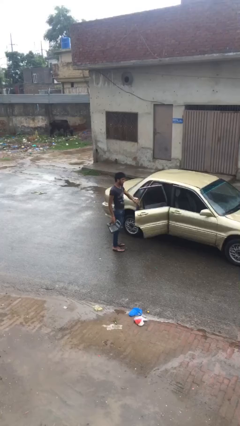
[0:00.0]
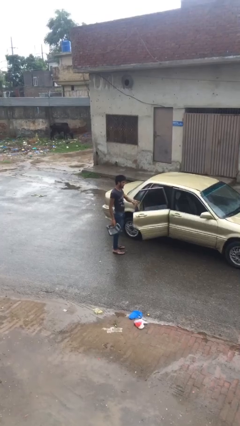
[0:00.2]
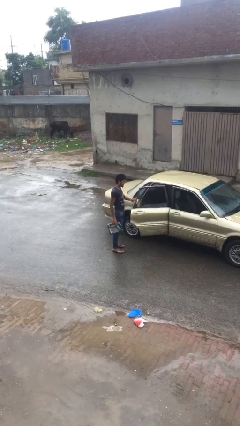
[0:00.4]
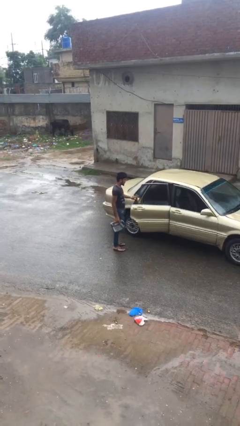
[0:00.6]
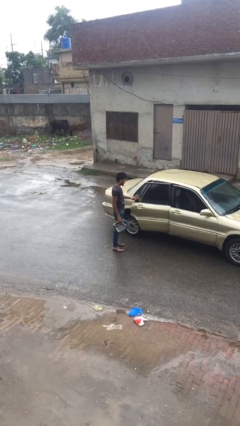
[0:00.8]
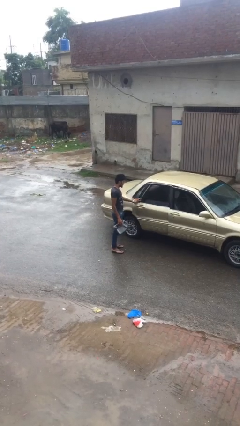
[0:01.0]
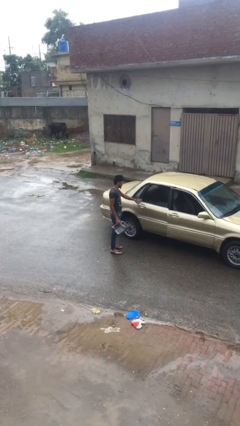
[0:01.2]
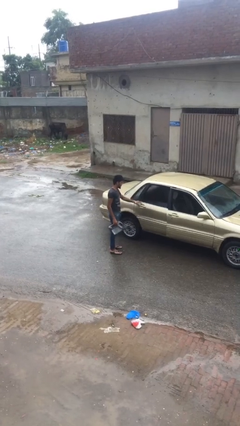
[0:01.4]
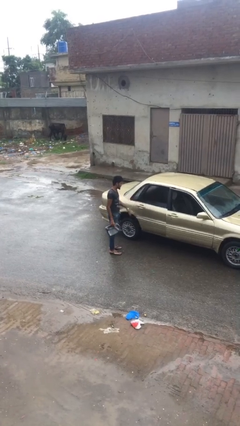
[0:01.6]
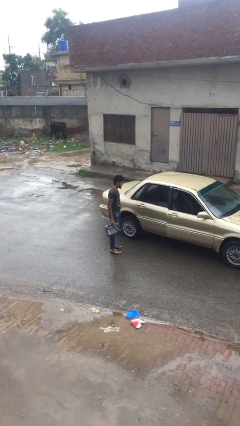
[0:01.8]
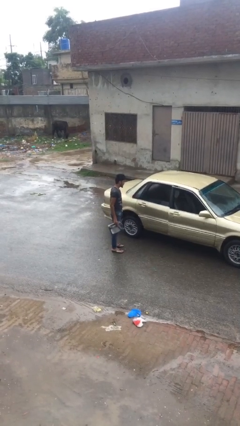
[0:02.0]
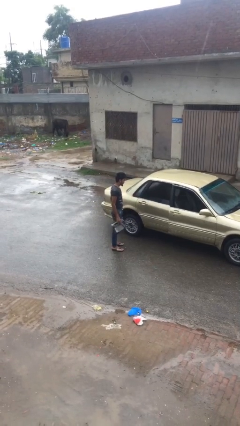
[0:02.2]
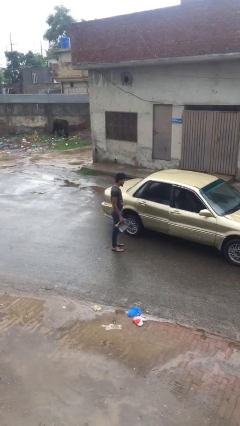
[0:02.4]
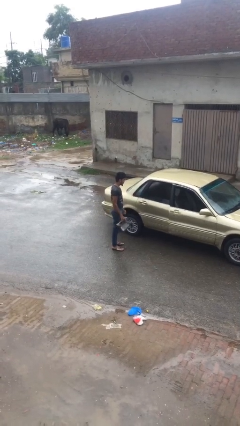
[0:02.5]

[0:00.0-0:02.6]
person closes car door

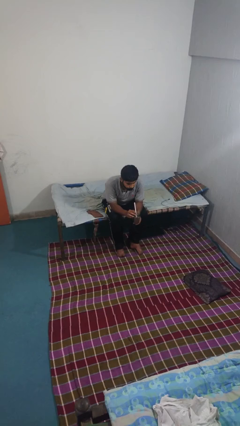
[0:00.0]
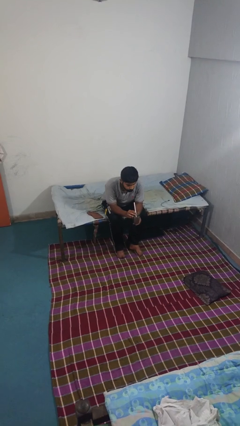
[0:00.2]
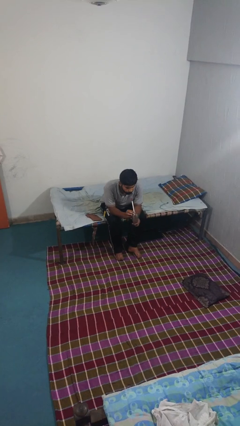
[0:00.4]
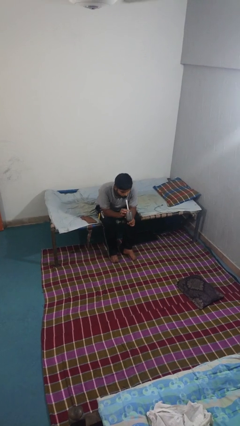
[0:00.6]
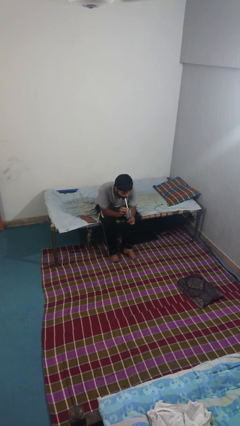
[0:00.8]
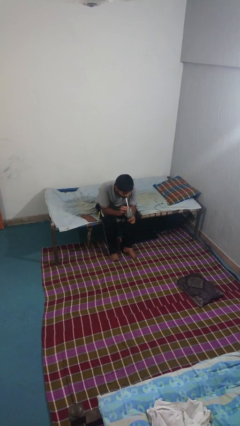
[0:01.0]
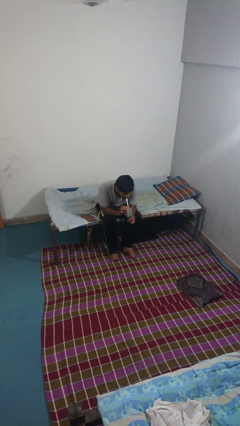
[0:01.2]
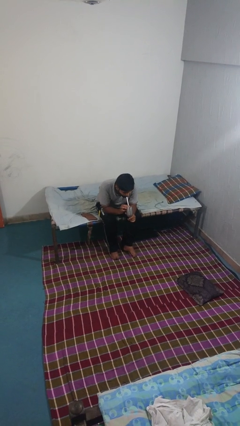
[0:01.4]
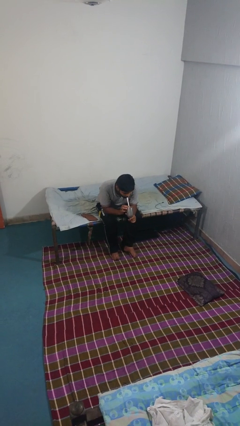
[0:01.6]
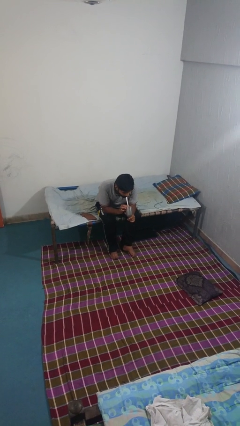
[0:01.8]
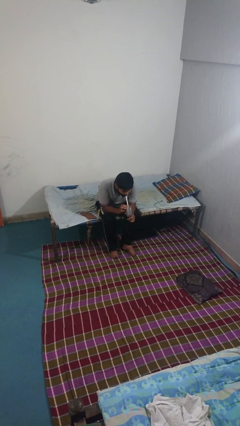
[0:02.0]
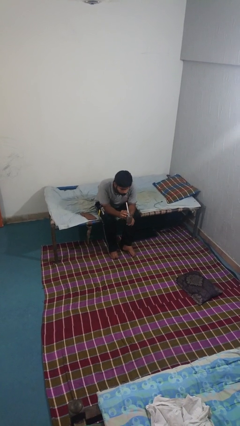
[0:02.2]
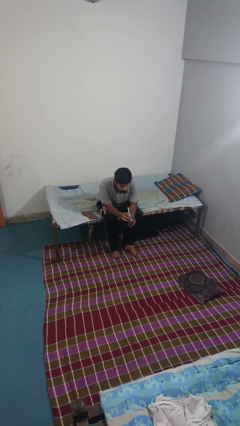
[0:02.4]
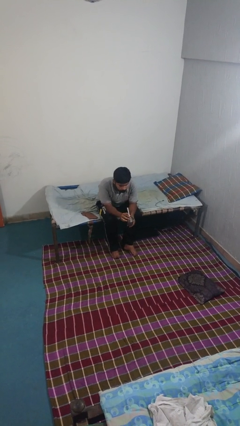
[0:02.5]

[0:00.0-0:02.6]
person drinks from straw

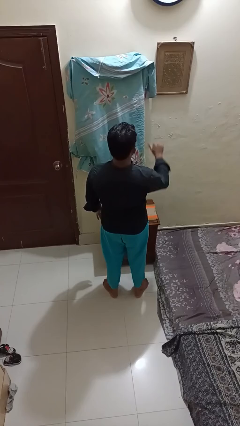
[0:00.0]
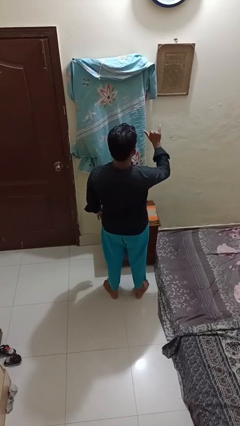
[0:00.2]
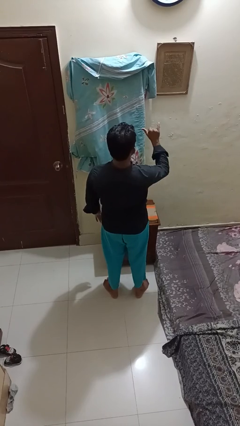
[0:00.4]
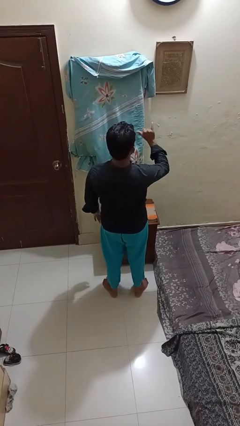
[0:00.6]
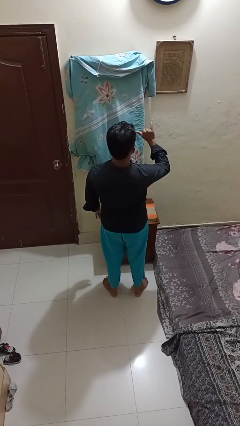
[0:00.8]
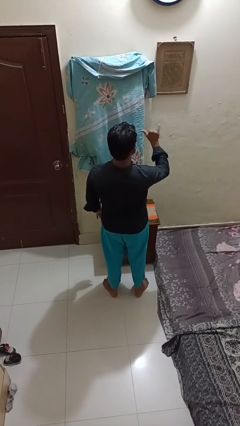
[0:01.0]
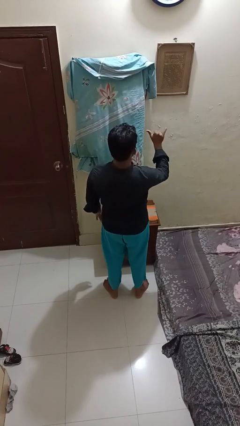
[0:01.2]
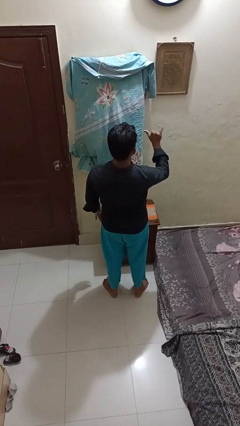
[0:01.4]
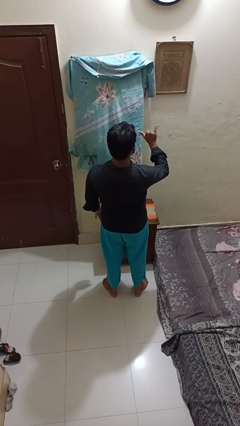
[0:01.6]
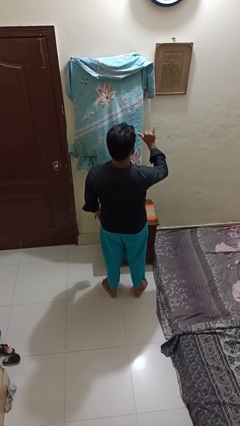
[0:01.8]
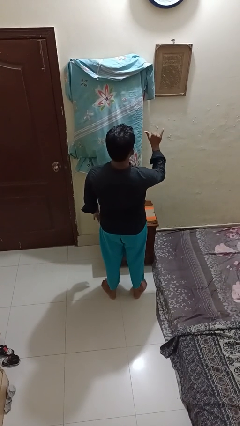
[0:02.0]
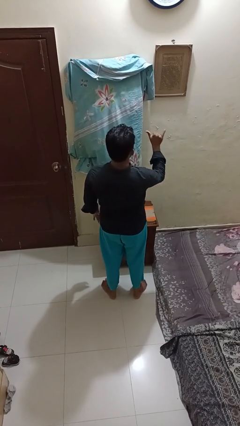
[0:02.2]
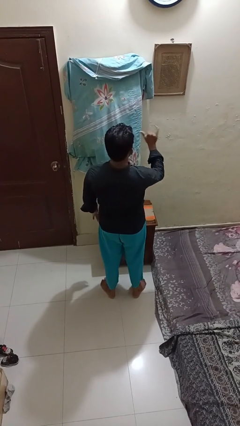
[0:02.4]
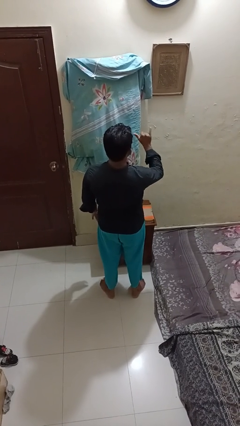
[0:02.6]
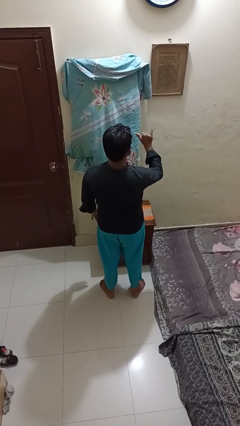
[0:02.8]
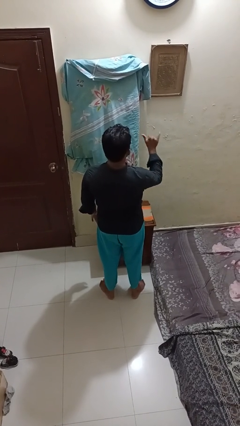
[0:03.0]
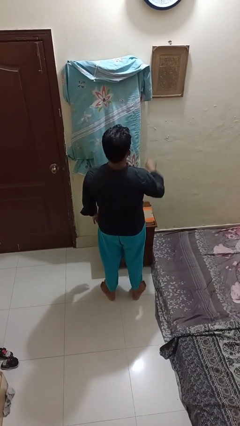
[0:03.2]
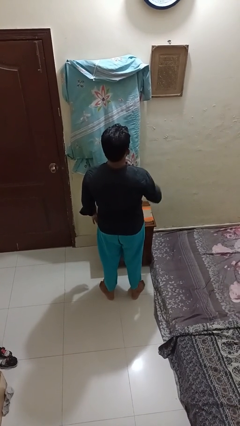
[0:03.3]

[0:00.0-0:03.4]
person gestures hang loose

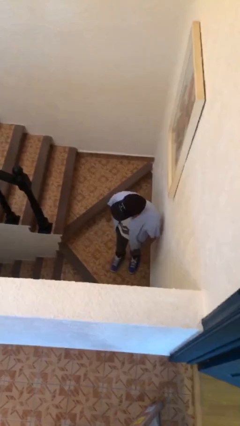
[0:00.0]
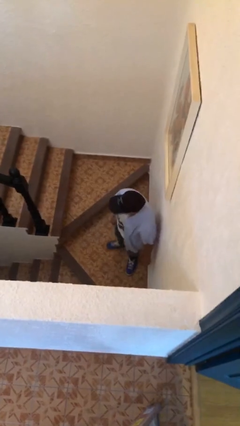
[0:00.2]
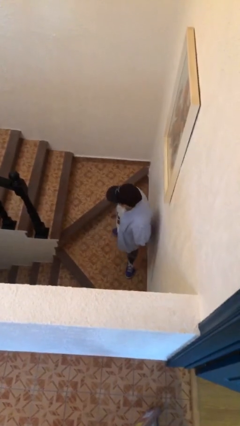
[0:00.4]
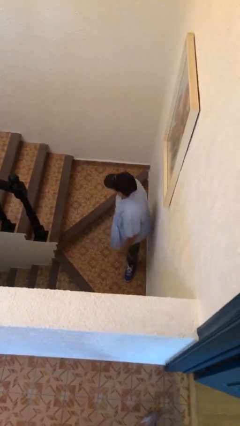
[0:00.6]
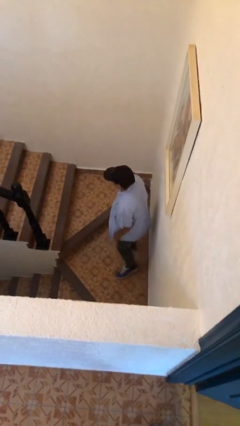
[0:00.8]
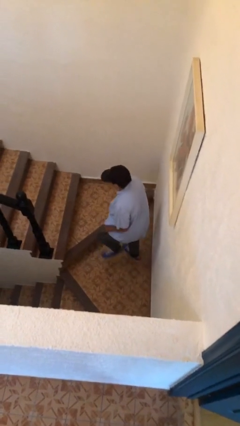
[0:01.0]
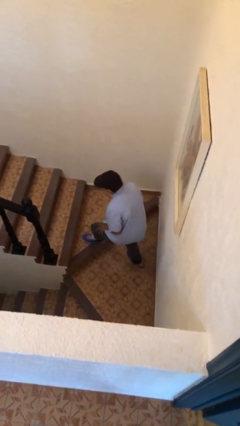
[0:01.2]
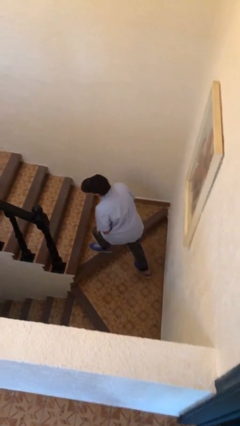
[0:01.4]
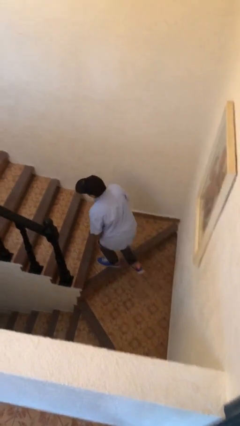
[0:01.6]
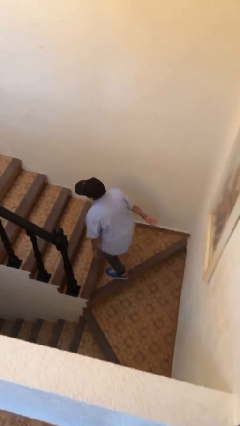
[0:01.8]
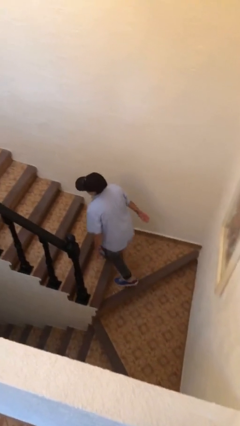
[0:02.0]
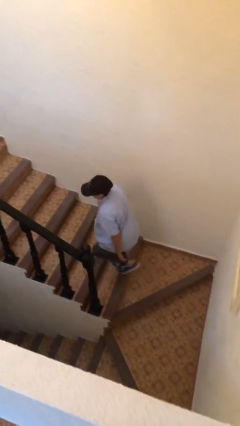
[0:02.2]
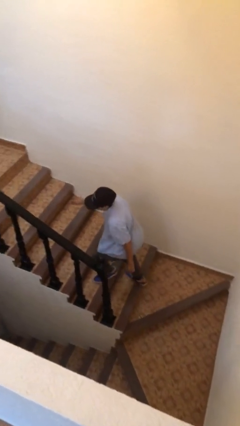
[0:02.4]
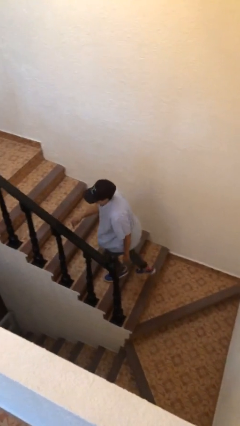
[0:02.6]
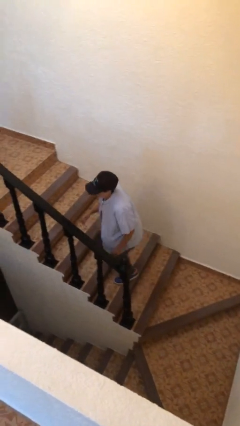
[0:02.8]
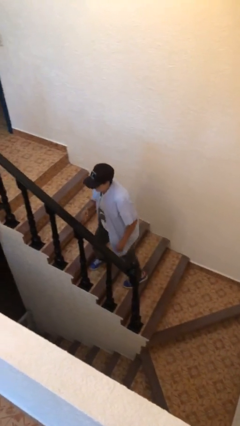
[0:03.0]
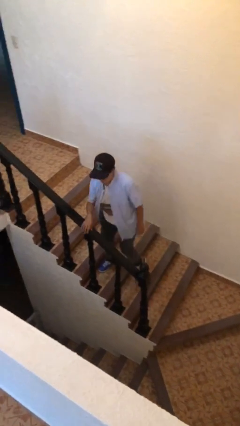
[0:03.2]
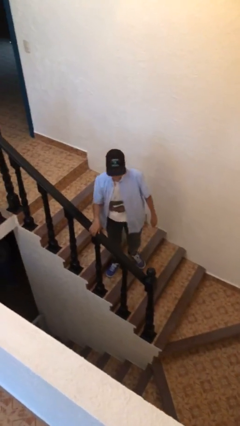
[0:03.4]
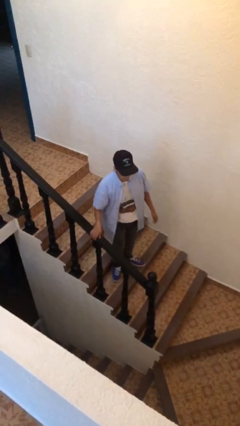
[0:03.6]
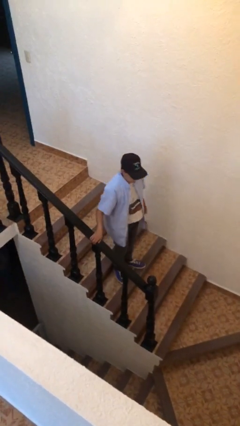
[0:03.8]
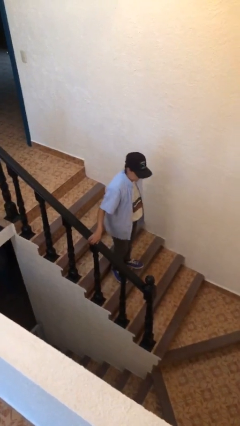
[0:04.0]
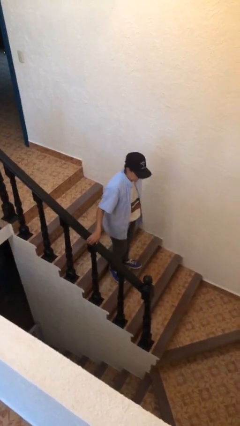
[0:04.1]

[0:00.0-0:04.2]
person climbs up stairs

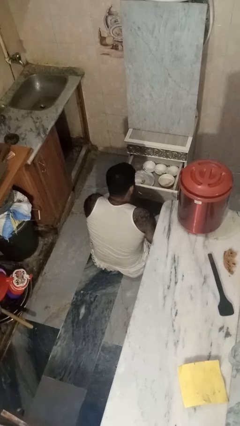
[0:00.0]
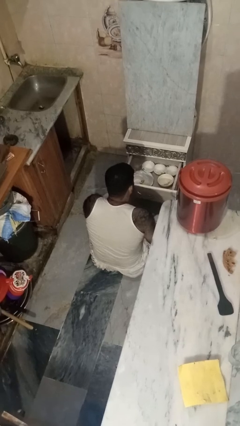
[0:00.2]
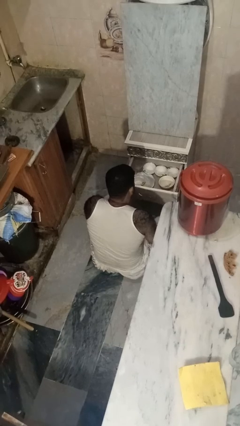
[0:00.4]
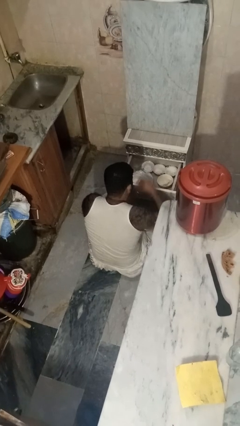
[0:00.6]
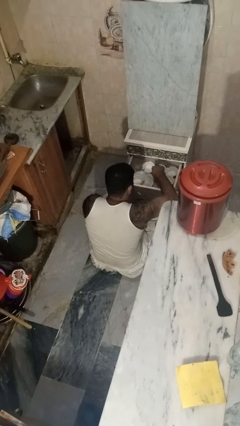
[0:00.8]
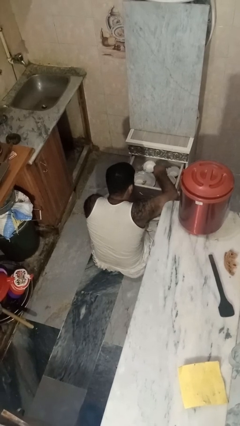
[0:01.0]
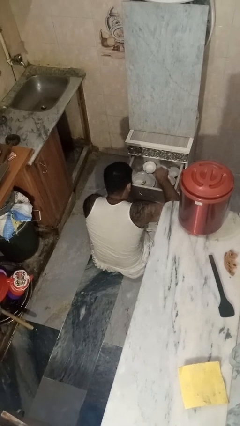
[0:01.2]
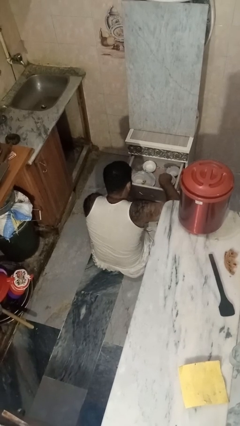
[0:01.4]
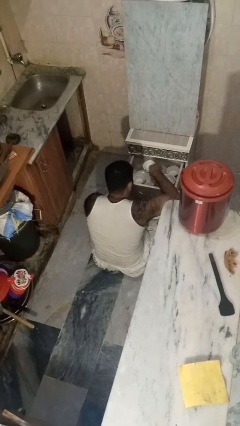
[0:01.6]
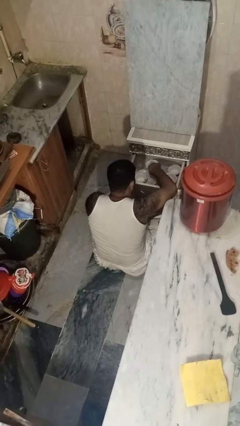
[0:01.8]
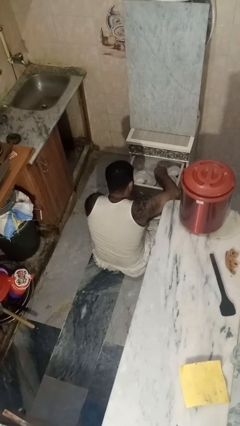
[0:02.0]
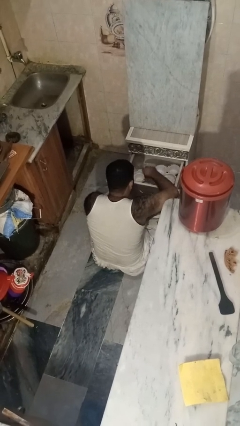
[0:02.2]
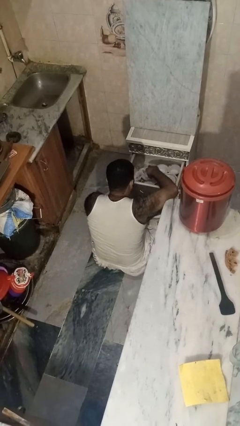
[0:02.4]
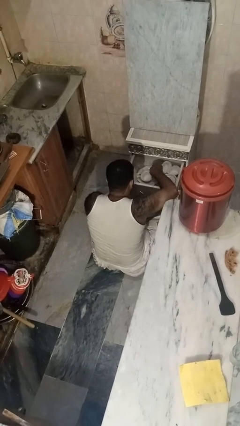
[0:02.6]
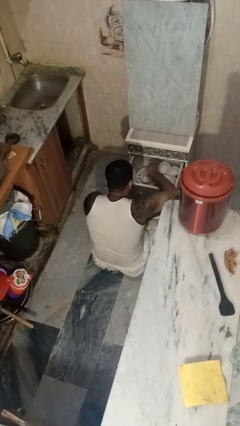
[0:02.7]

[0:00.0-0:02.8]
person searches in kitchen drawer

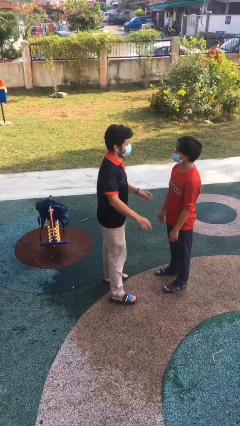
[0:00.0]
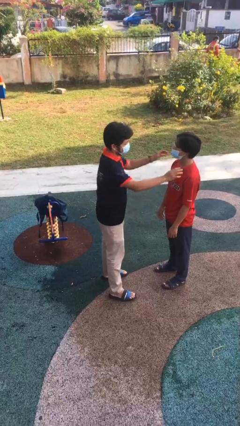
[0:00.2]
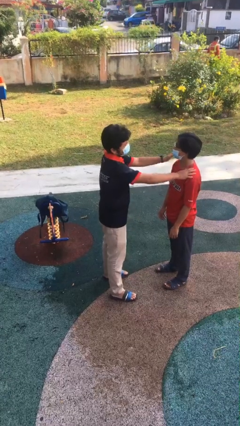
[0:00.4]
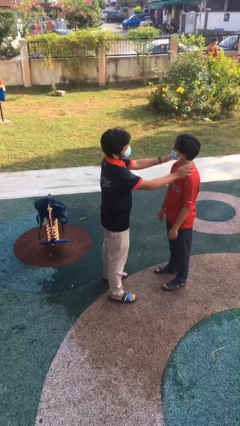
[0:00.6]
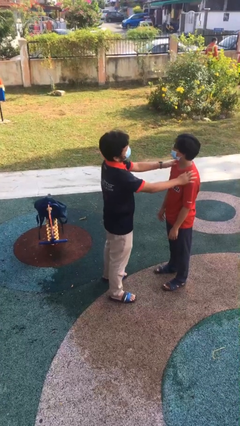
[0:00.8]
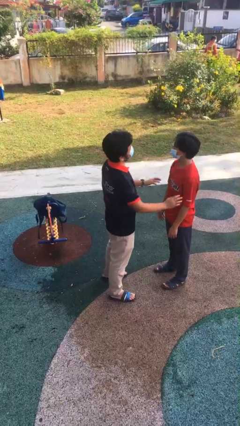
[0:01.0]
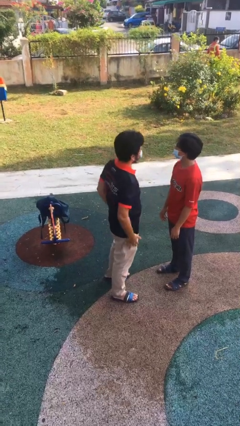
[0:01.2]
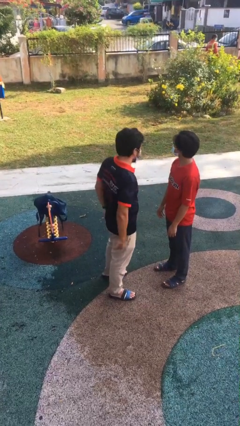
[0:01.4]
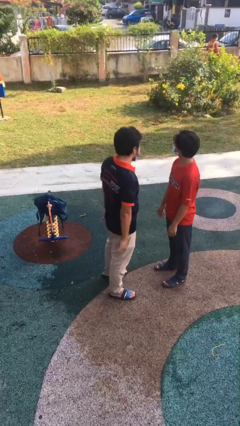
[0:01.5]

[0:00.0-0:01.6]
person pounds shoulders of person
